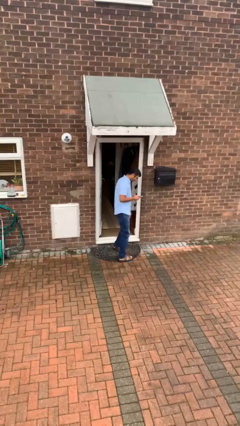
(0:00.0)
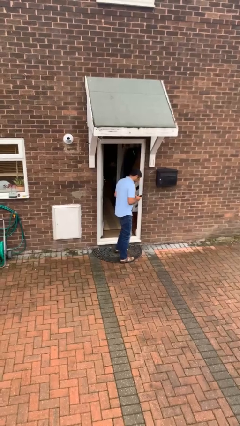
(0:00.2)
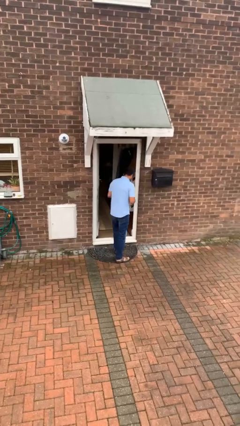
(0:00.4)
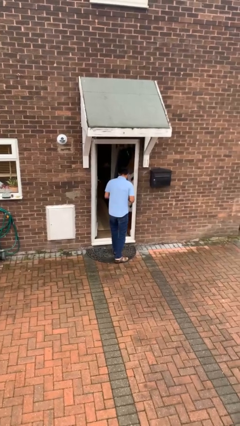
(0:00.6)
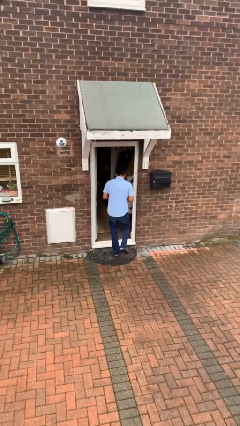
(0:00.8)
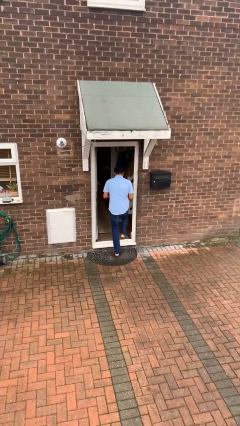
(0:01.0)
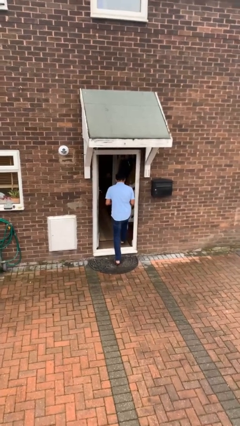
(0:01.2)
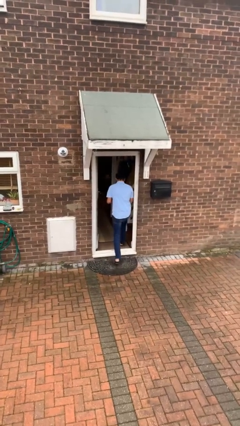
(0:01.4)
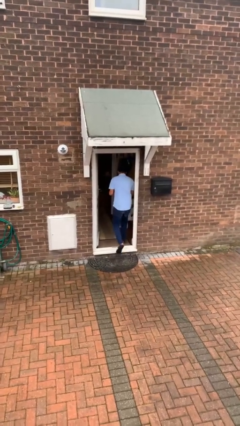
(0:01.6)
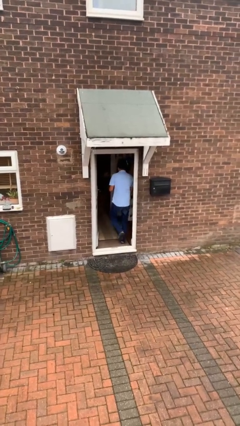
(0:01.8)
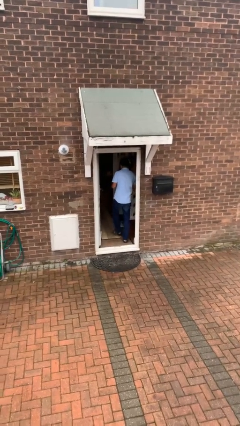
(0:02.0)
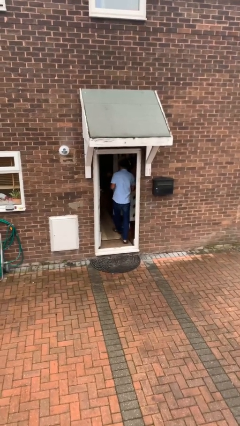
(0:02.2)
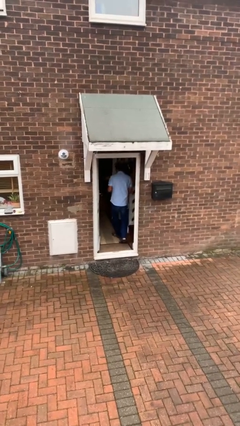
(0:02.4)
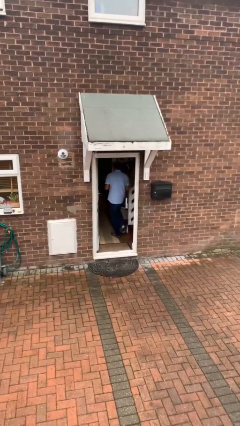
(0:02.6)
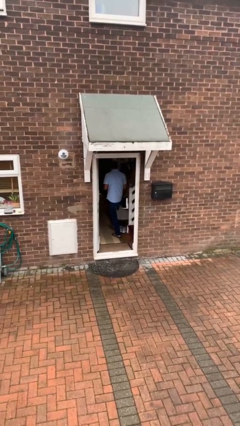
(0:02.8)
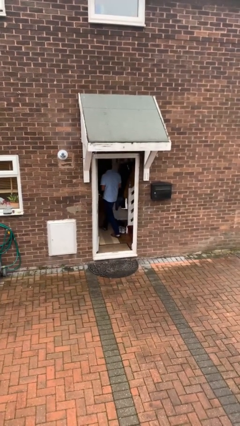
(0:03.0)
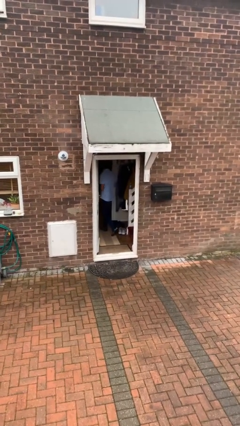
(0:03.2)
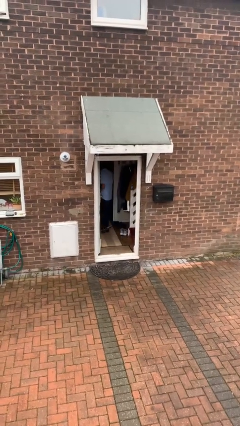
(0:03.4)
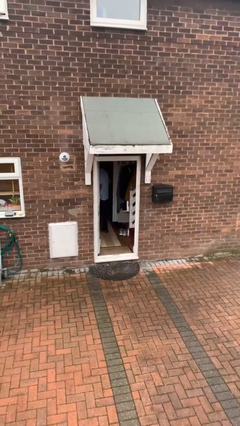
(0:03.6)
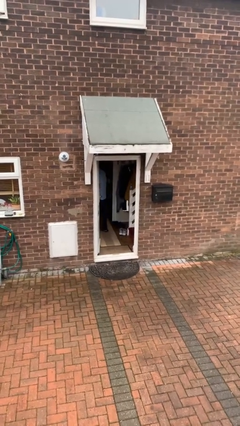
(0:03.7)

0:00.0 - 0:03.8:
person exits scene through structure

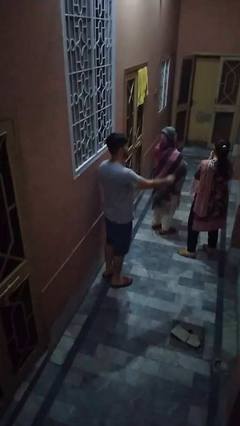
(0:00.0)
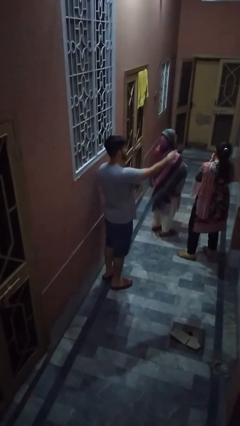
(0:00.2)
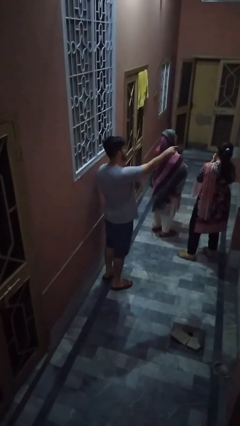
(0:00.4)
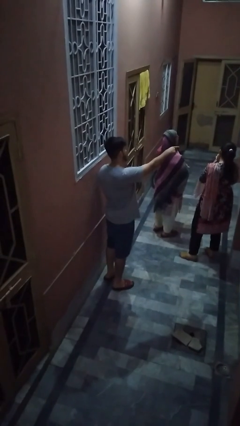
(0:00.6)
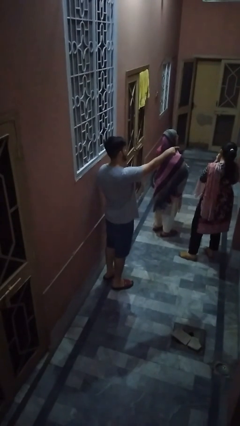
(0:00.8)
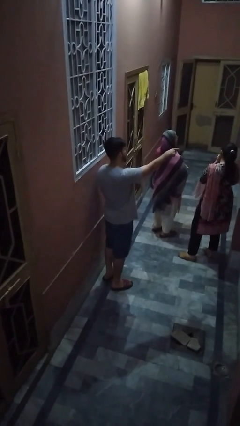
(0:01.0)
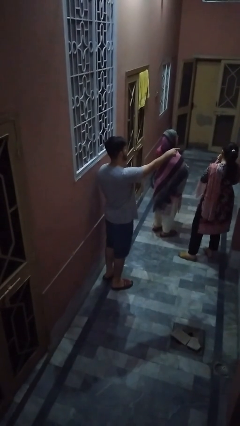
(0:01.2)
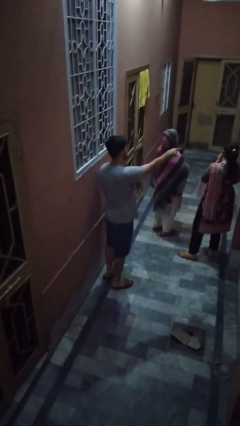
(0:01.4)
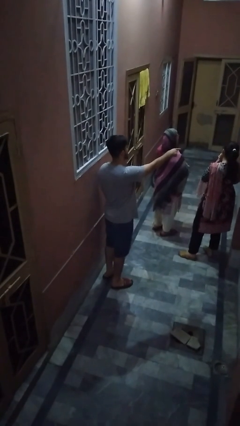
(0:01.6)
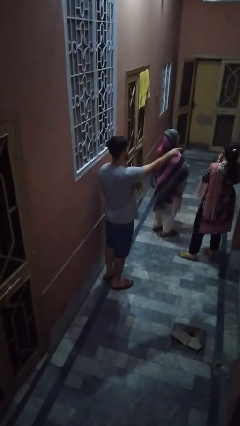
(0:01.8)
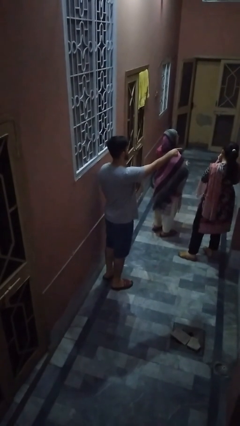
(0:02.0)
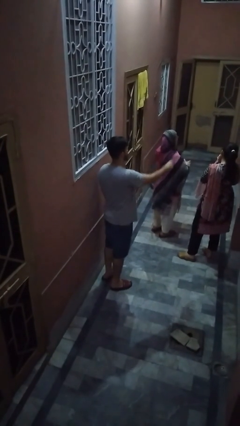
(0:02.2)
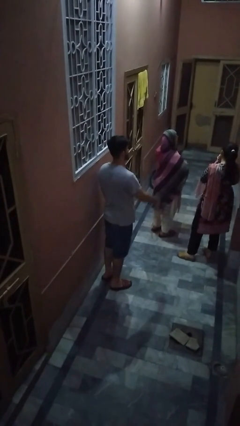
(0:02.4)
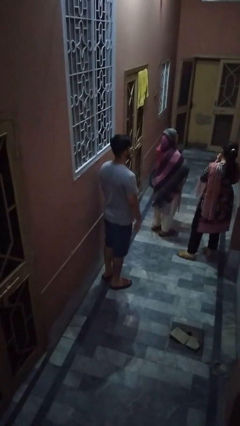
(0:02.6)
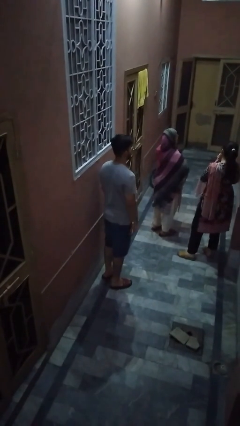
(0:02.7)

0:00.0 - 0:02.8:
person points at person

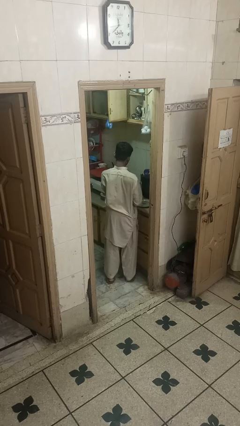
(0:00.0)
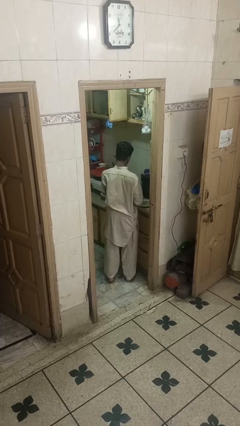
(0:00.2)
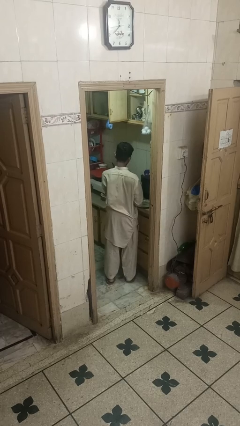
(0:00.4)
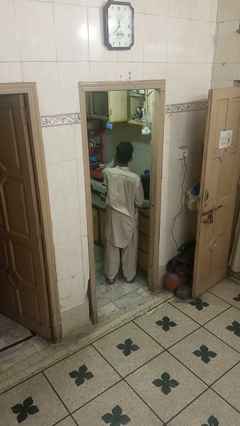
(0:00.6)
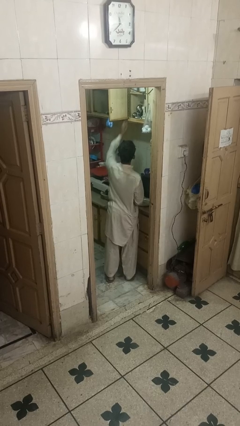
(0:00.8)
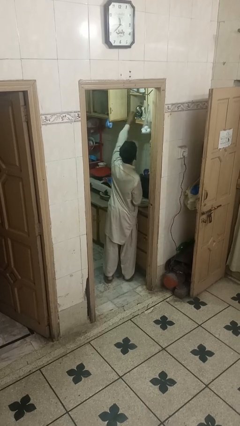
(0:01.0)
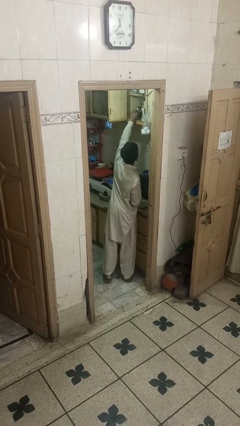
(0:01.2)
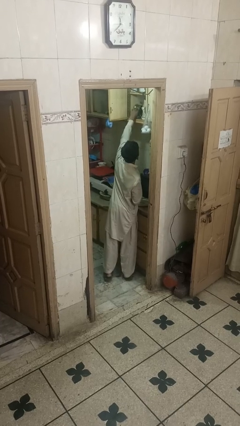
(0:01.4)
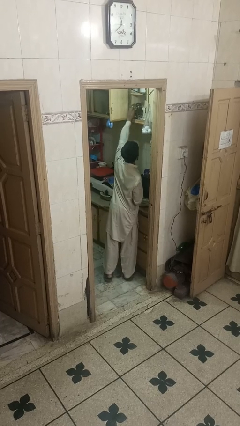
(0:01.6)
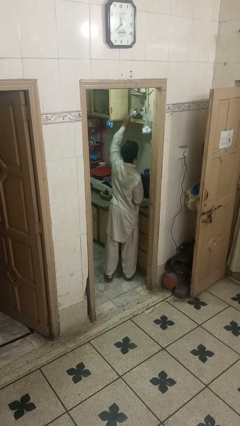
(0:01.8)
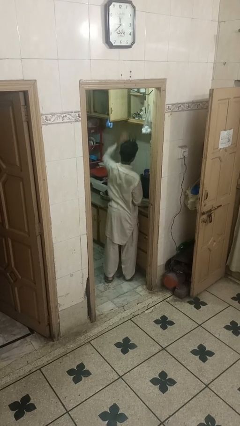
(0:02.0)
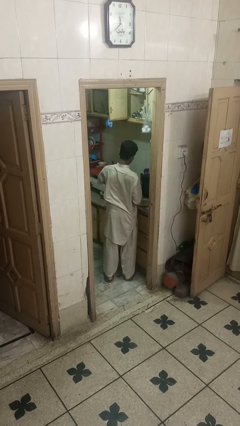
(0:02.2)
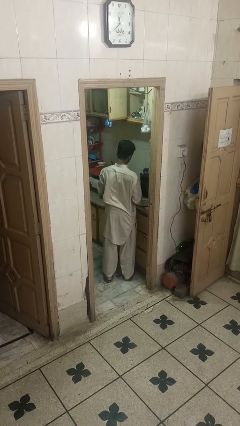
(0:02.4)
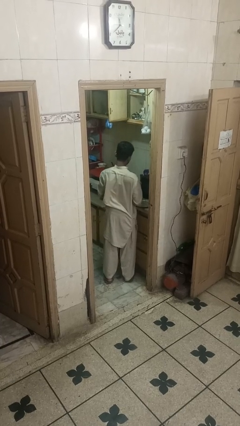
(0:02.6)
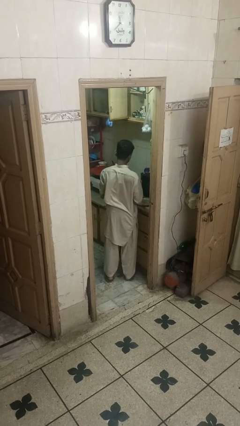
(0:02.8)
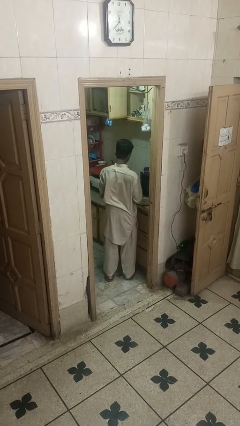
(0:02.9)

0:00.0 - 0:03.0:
person takes object from cabinet

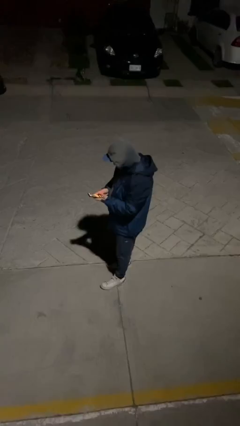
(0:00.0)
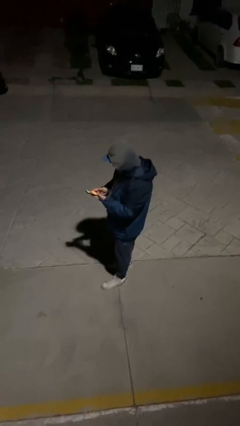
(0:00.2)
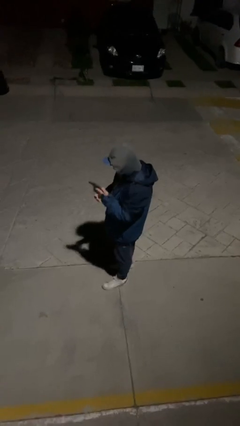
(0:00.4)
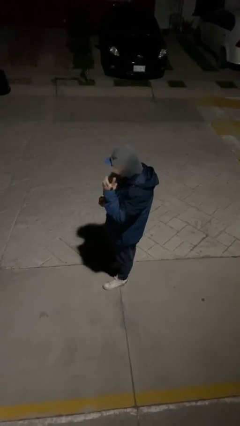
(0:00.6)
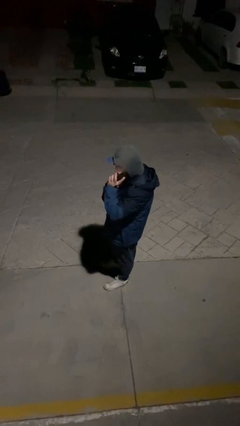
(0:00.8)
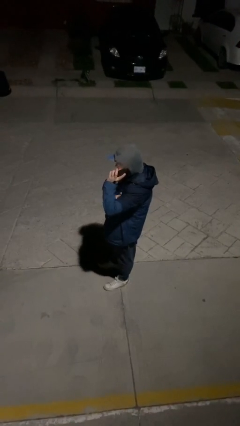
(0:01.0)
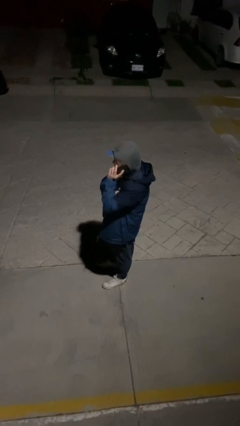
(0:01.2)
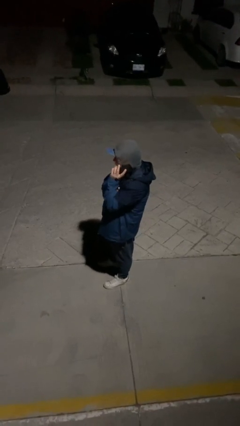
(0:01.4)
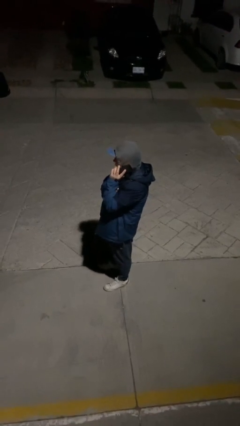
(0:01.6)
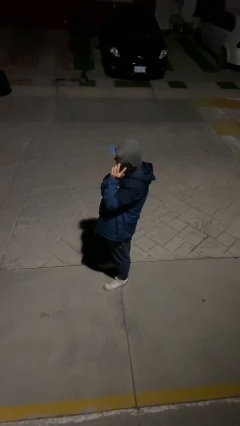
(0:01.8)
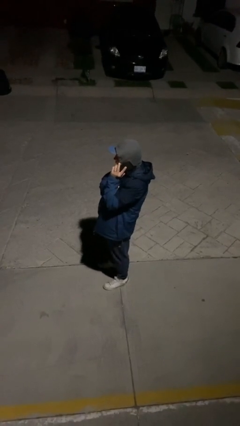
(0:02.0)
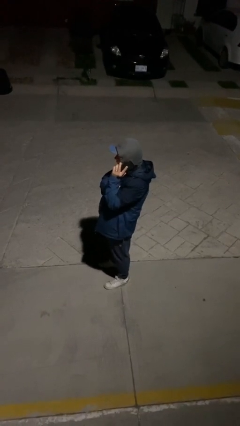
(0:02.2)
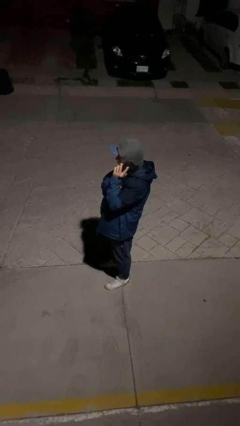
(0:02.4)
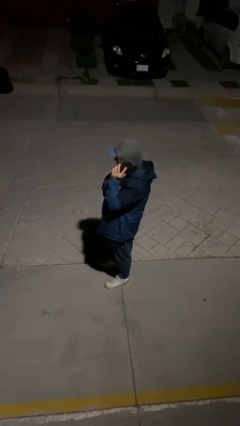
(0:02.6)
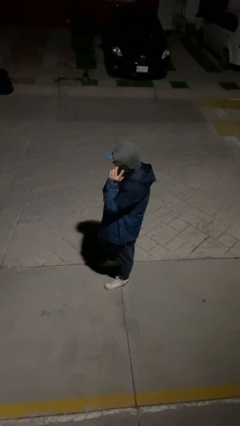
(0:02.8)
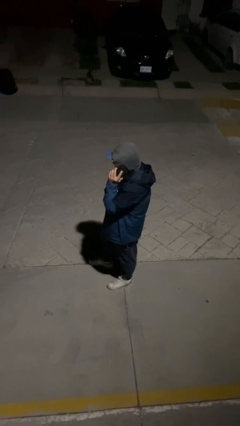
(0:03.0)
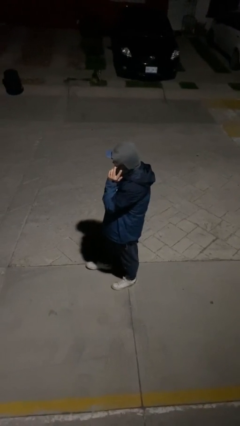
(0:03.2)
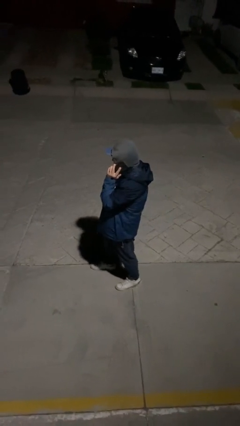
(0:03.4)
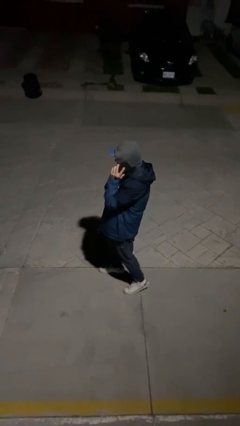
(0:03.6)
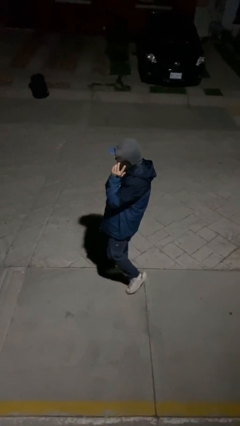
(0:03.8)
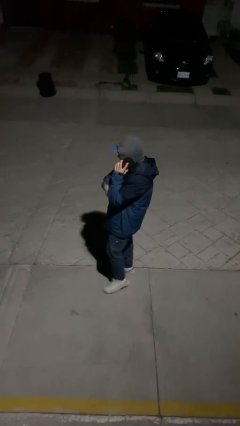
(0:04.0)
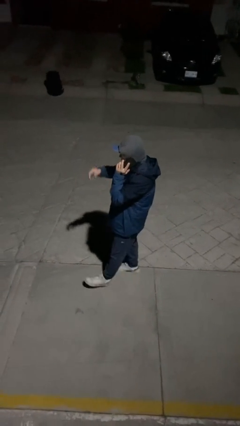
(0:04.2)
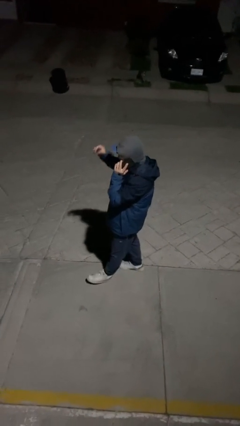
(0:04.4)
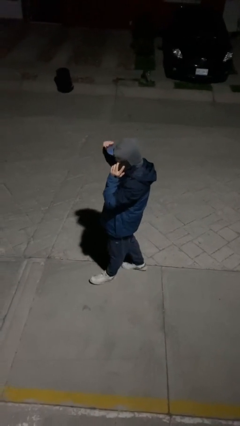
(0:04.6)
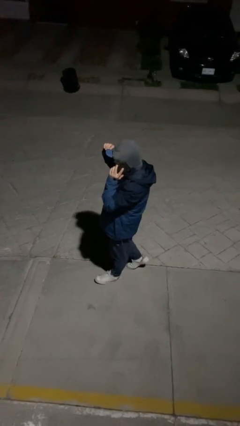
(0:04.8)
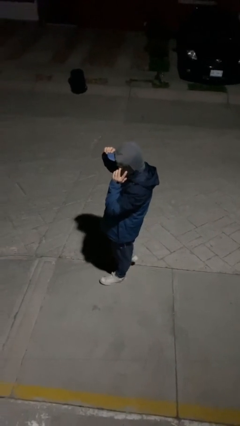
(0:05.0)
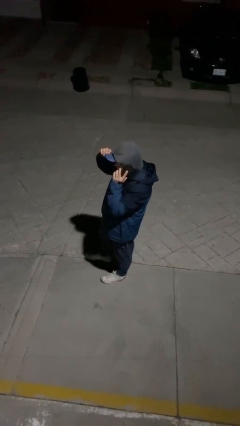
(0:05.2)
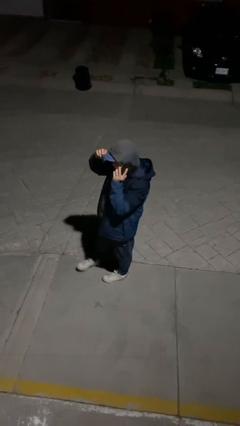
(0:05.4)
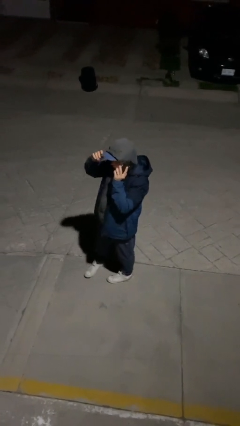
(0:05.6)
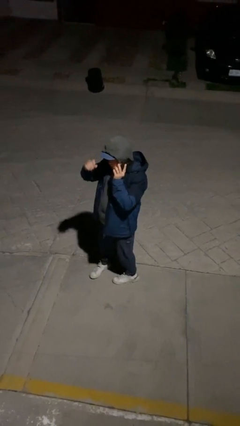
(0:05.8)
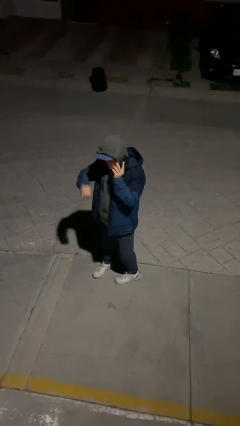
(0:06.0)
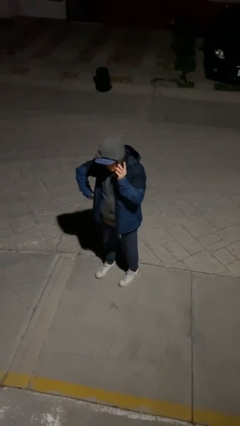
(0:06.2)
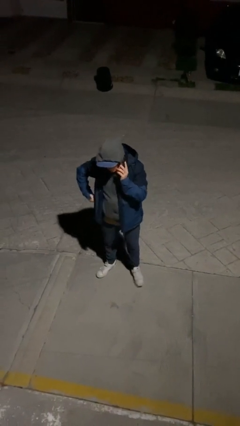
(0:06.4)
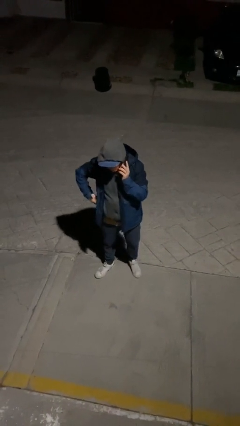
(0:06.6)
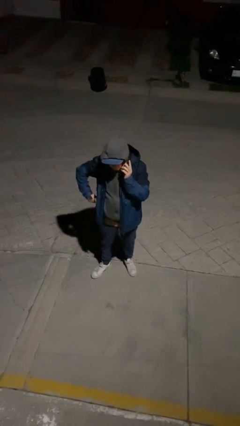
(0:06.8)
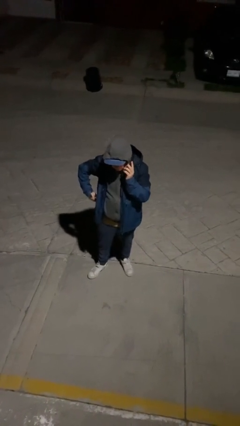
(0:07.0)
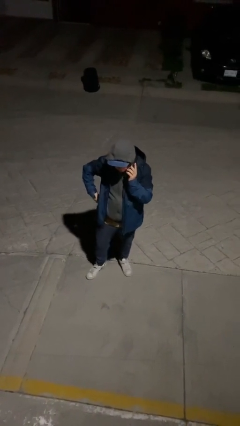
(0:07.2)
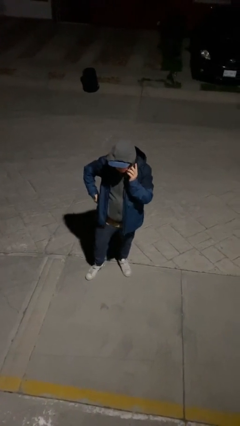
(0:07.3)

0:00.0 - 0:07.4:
person talks on phone

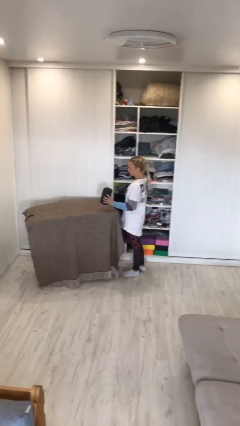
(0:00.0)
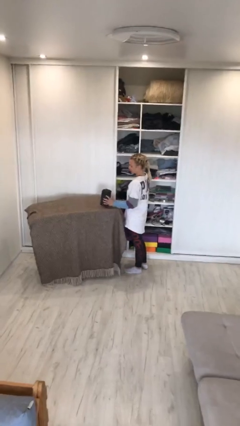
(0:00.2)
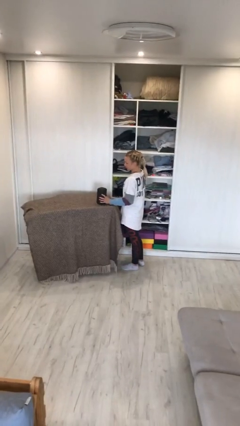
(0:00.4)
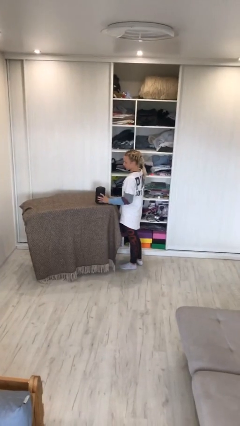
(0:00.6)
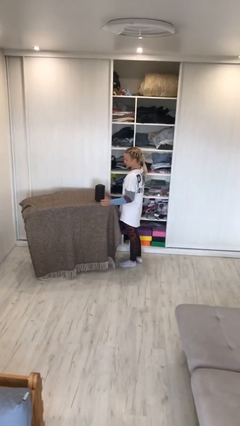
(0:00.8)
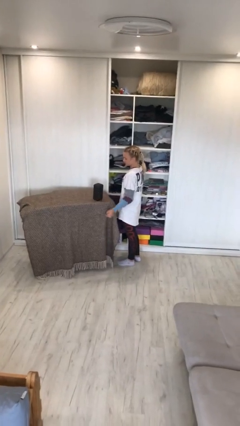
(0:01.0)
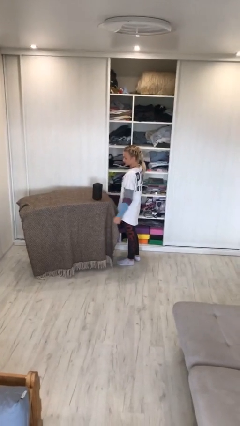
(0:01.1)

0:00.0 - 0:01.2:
person puts down object on table
